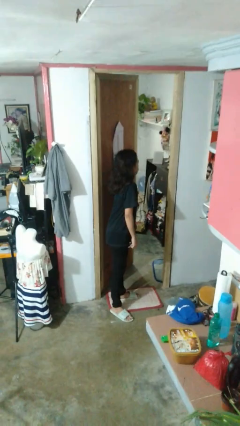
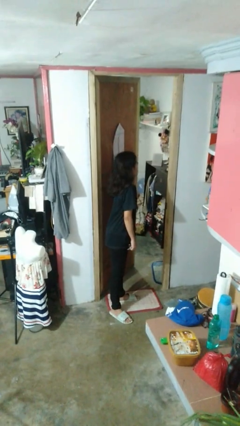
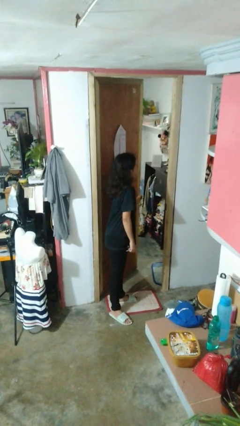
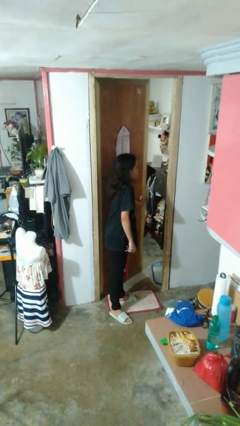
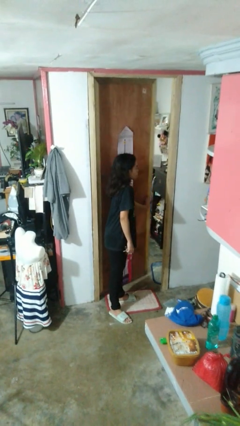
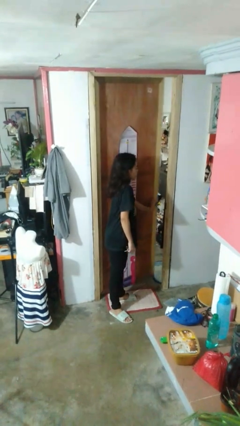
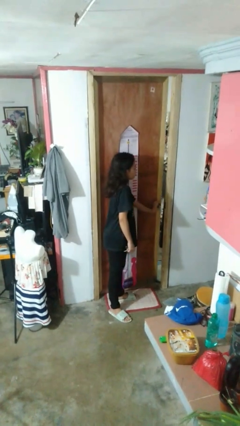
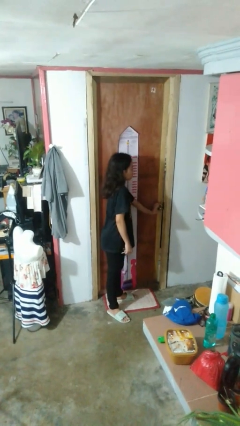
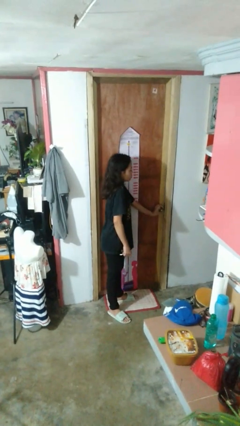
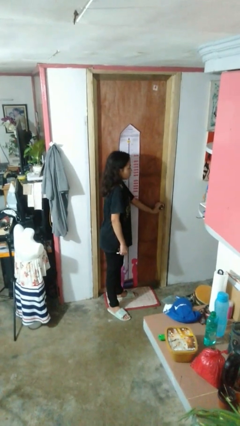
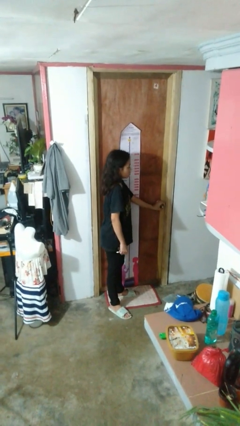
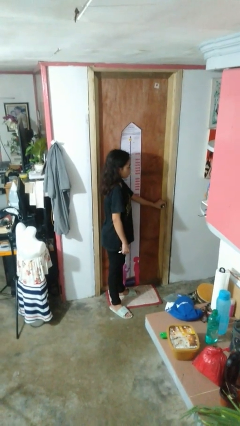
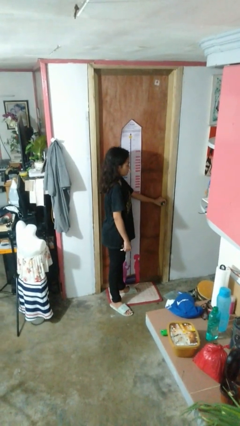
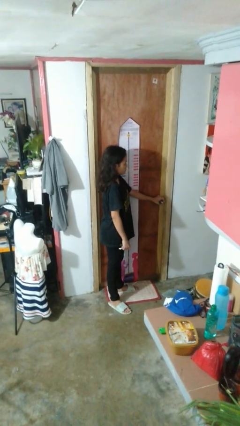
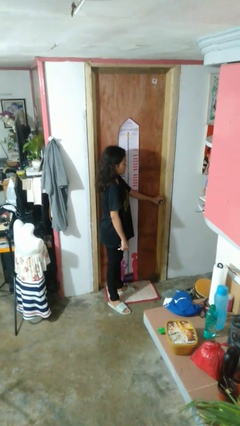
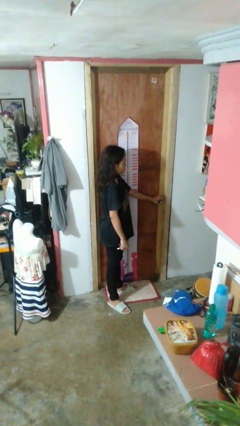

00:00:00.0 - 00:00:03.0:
person closes facility door

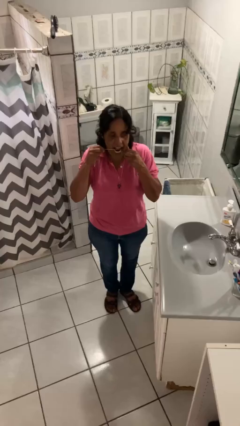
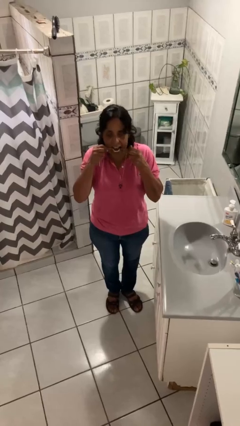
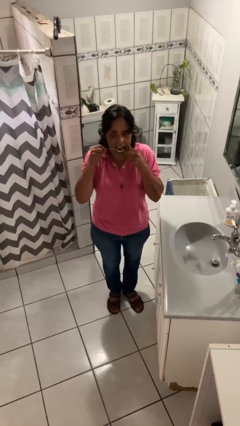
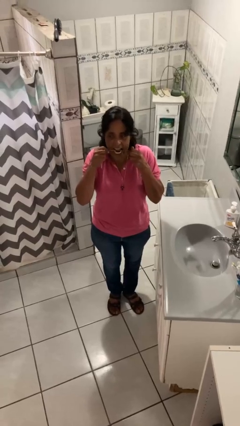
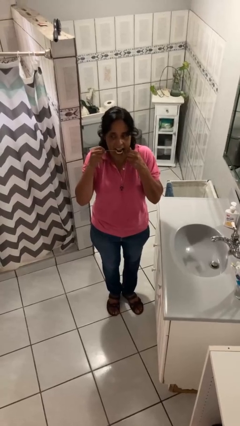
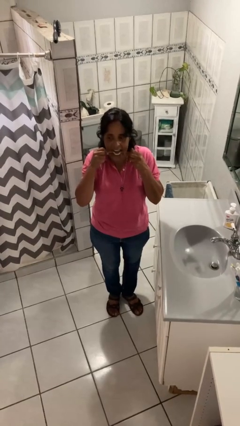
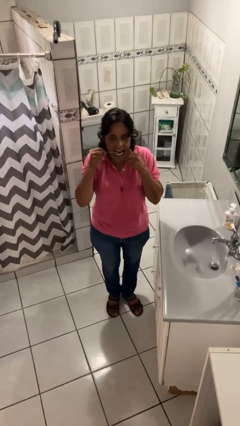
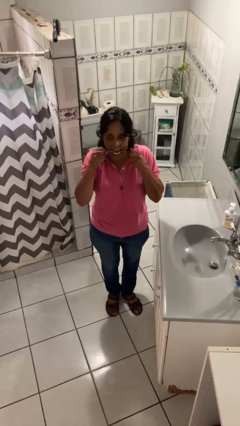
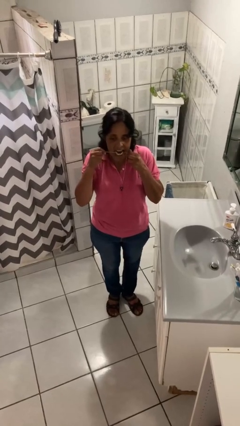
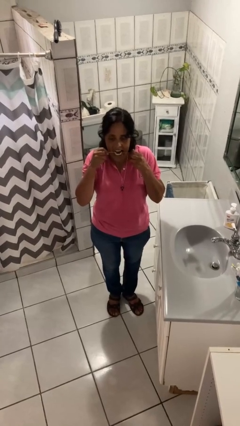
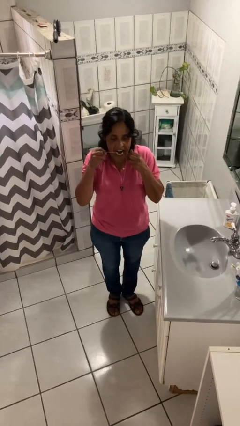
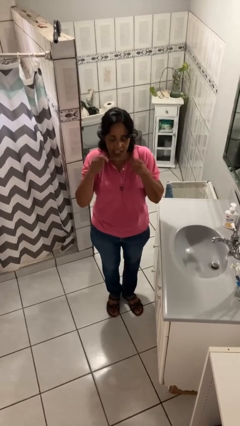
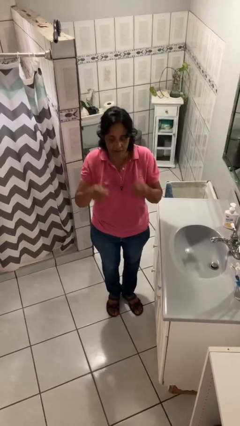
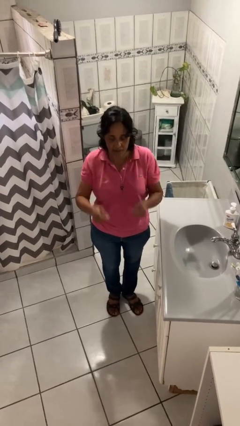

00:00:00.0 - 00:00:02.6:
person flosses

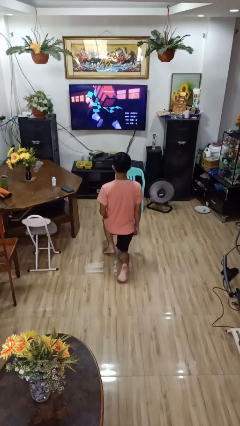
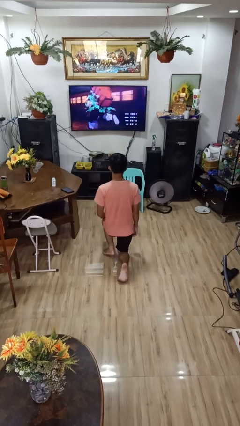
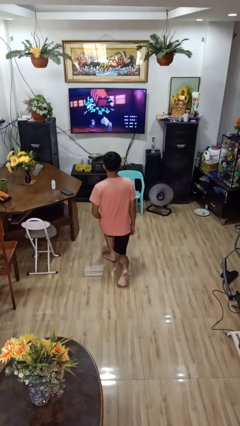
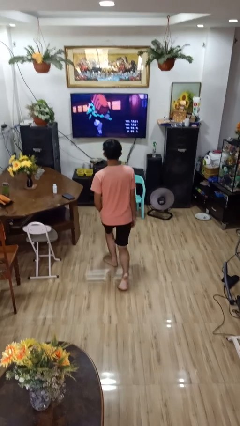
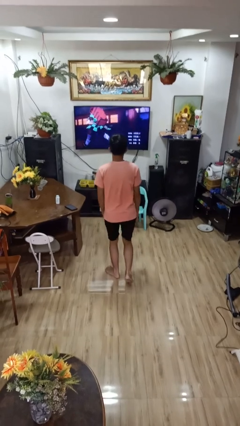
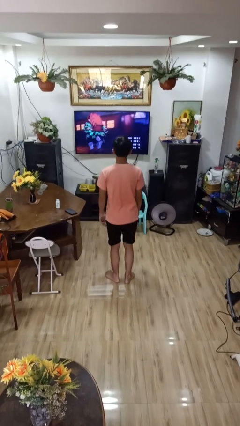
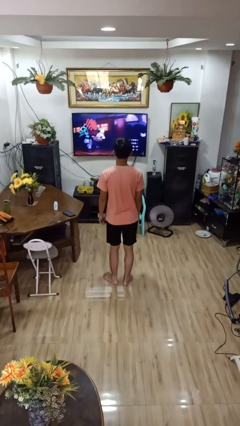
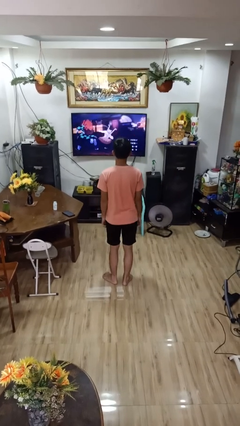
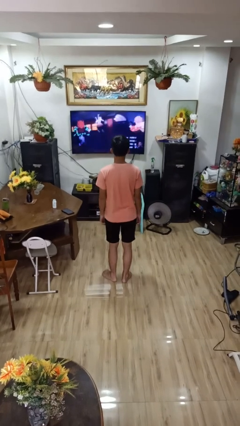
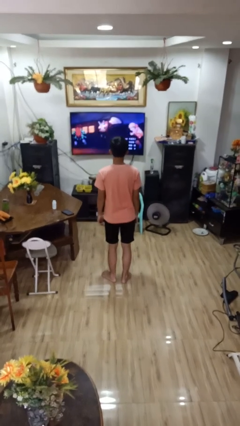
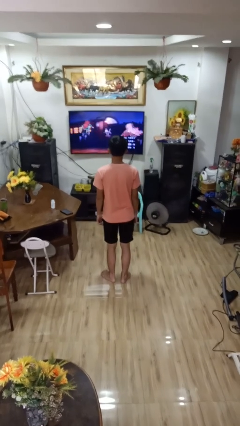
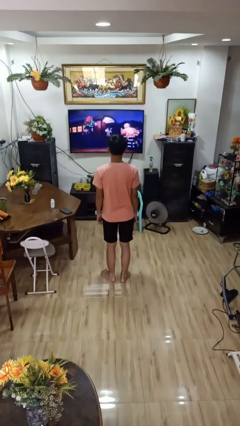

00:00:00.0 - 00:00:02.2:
person stands up from floor

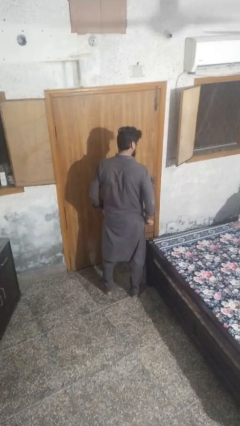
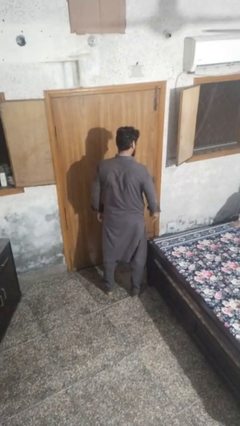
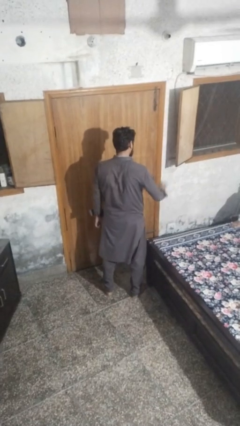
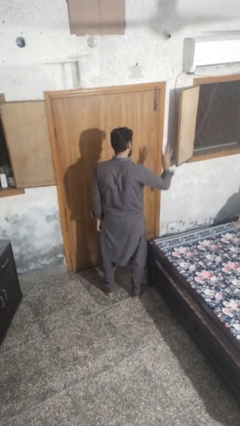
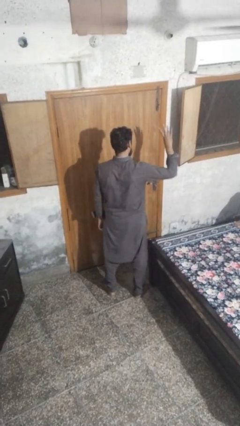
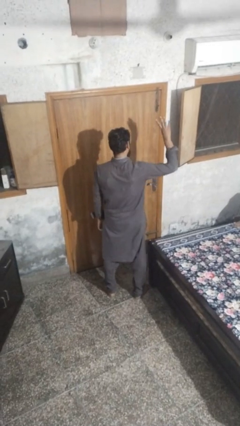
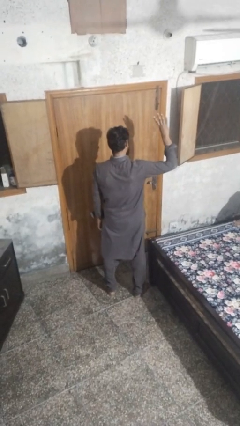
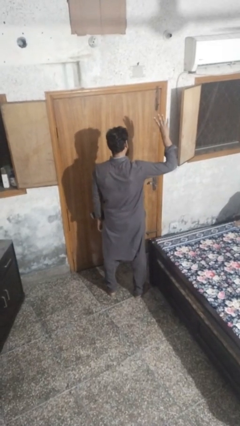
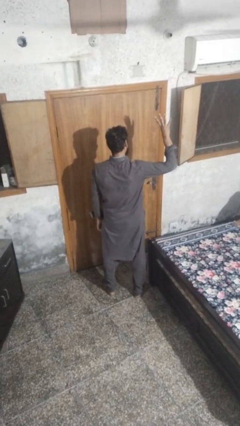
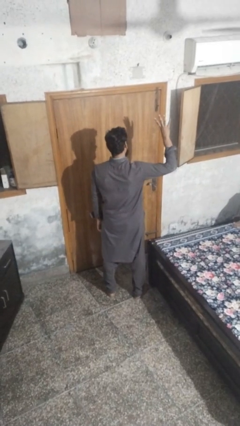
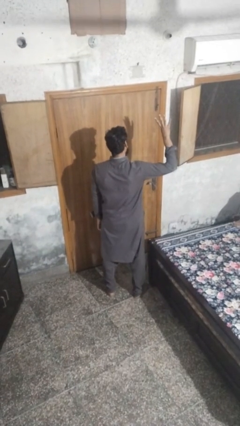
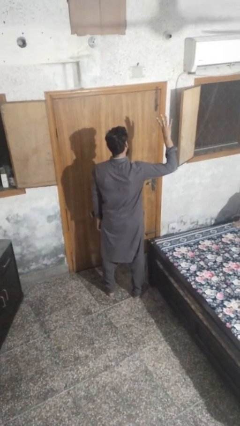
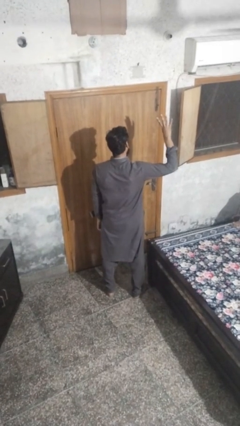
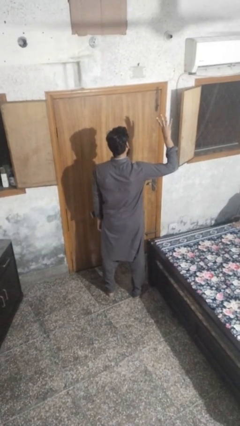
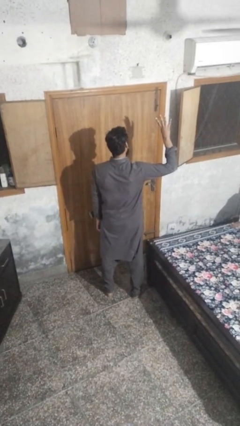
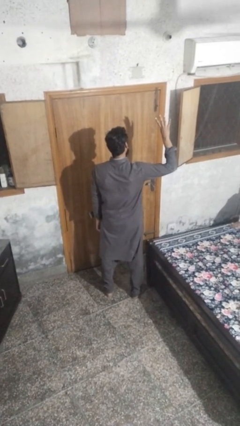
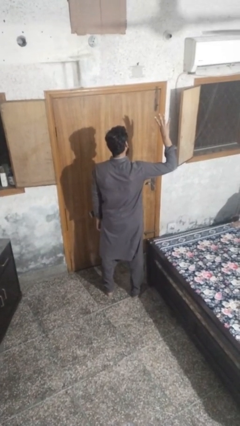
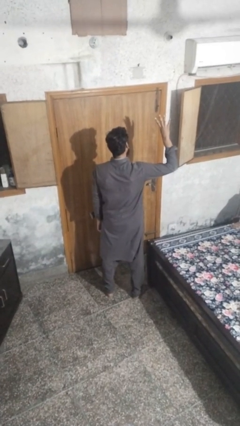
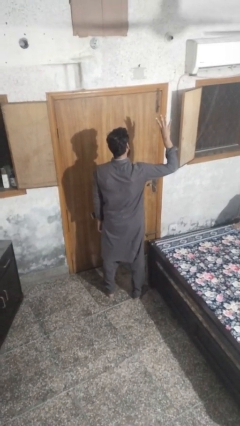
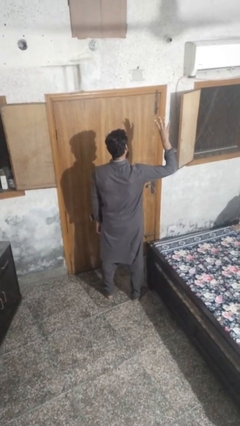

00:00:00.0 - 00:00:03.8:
person gestures number four

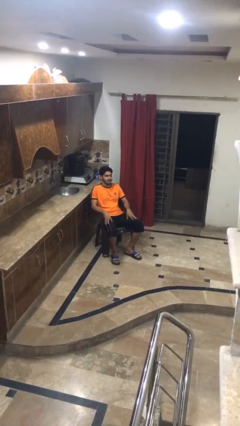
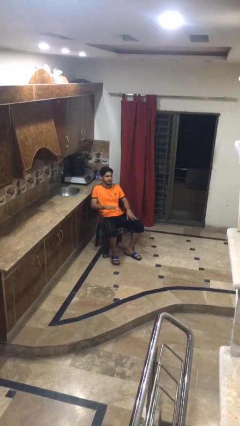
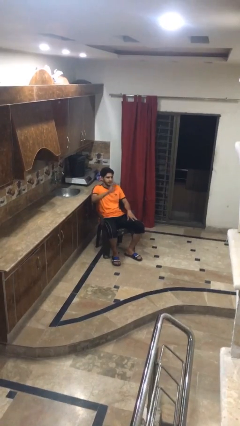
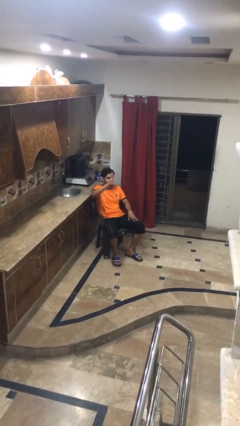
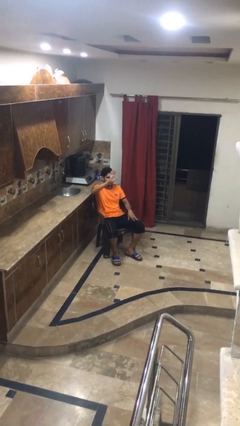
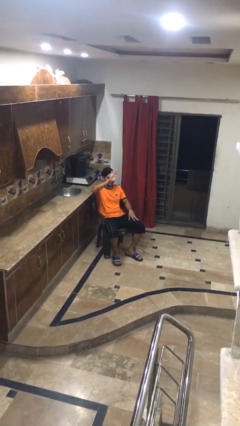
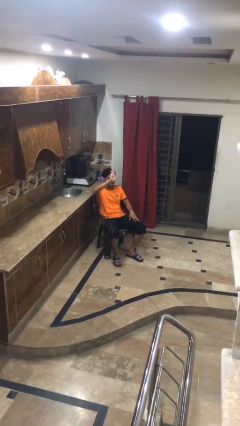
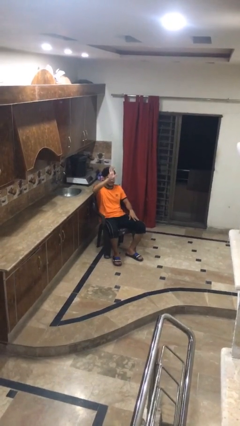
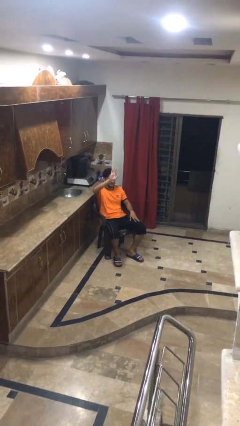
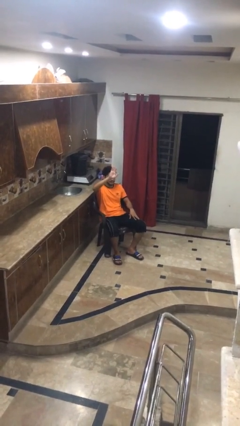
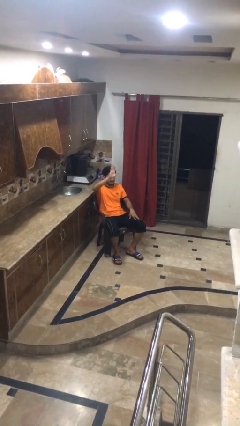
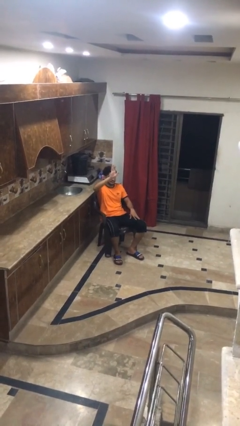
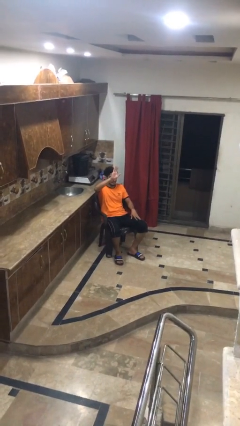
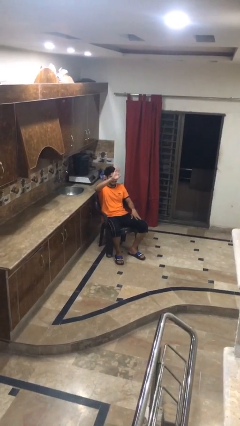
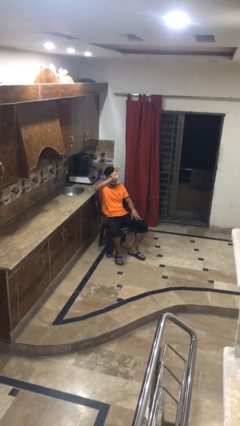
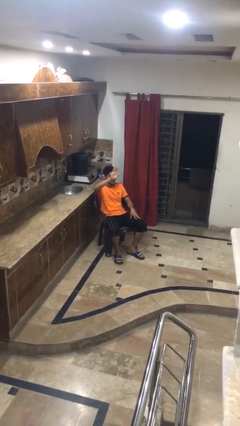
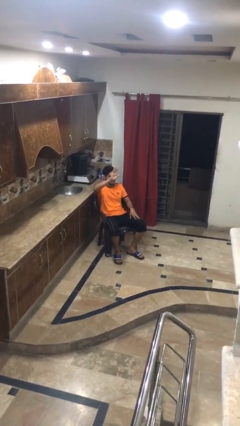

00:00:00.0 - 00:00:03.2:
person waves at person

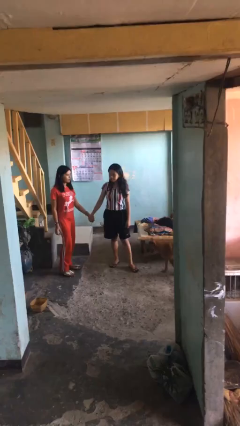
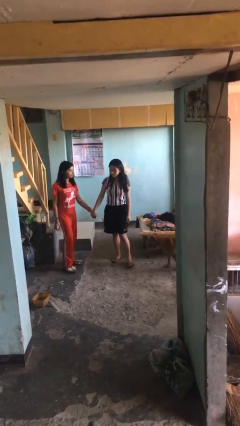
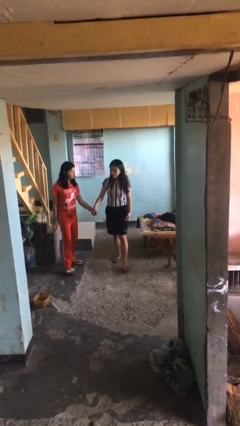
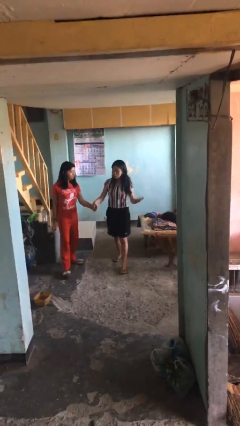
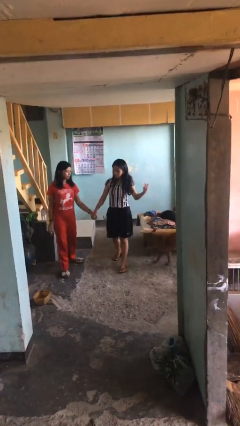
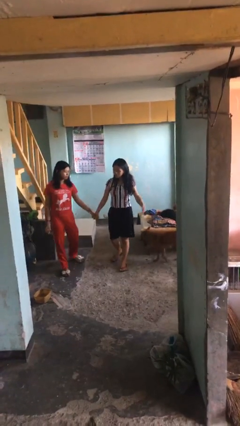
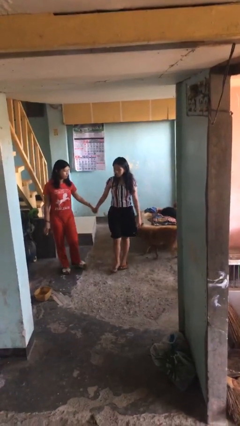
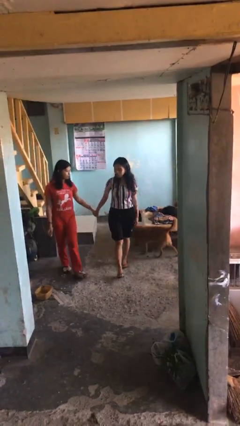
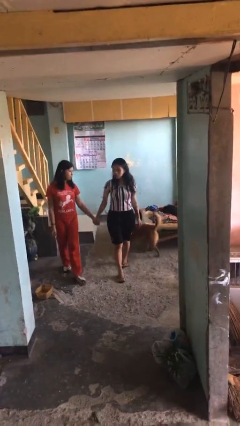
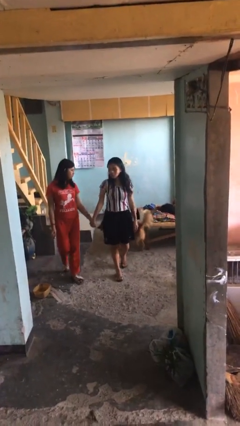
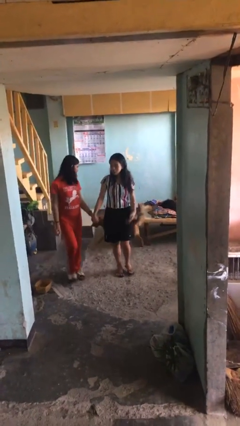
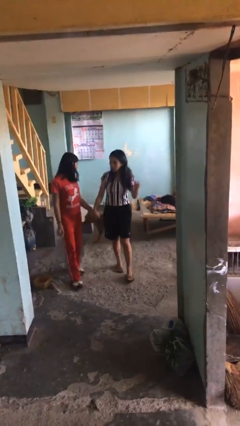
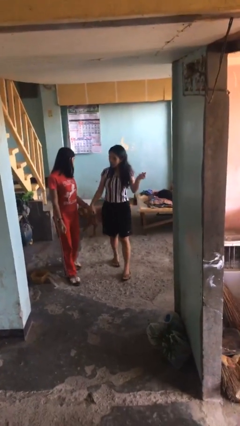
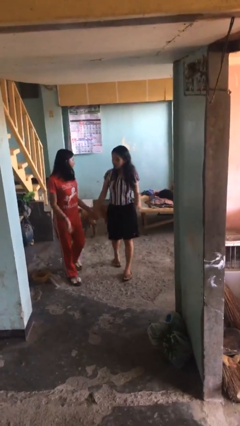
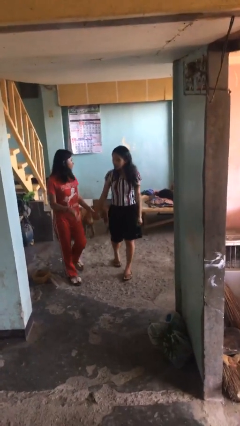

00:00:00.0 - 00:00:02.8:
person holds hand
